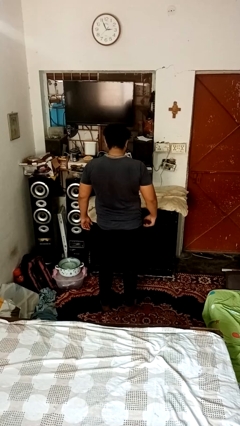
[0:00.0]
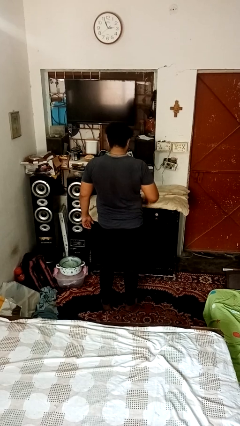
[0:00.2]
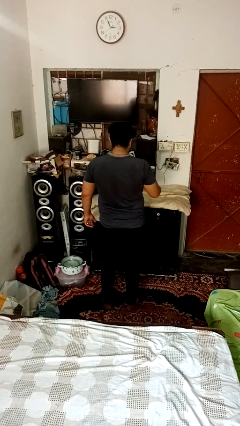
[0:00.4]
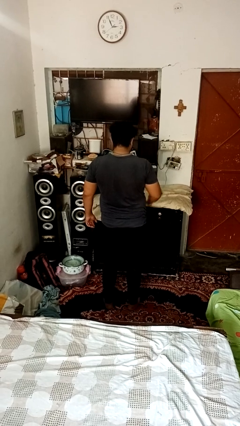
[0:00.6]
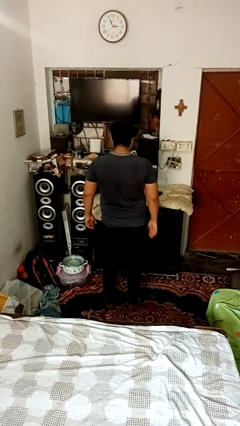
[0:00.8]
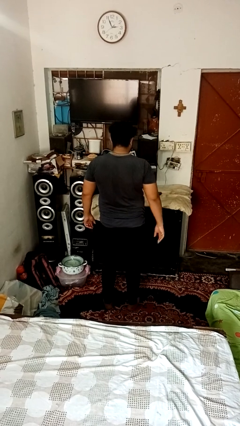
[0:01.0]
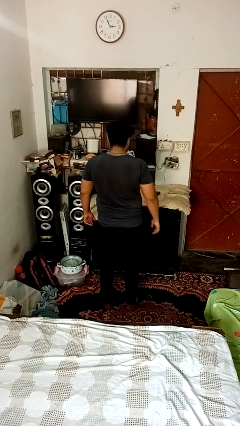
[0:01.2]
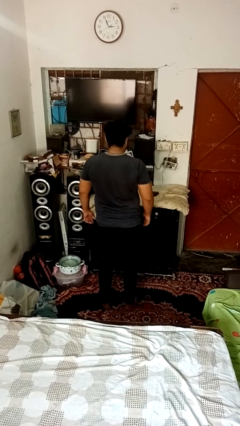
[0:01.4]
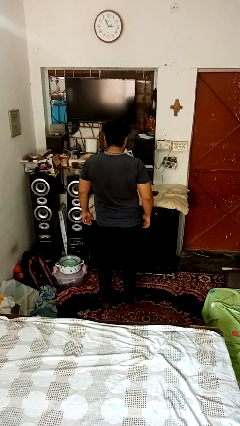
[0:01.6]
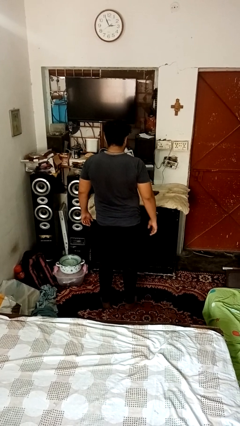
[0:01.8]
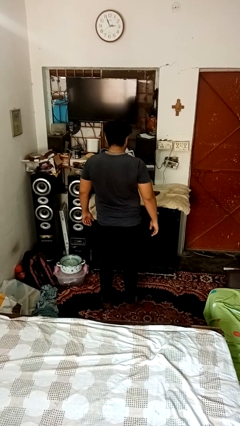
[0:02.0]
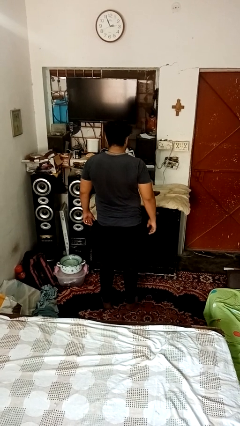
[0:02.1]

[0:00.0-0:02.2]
person throws object on table

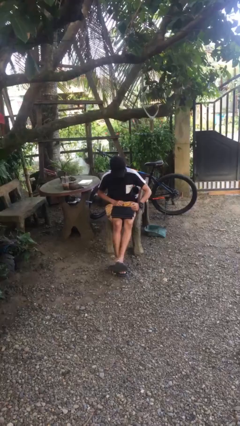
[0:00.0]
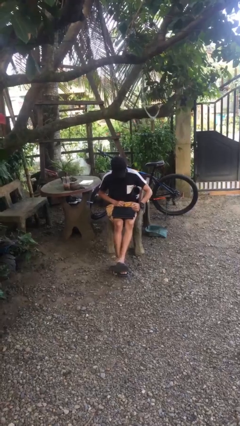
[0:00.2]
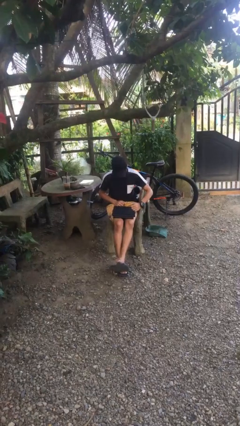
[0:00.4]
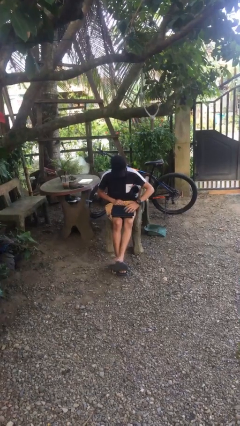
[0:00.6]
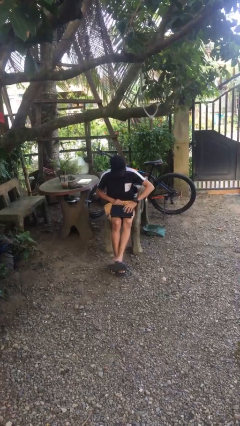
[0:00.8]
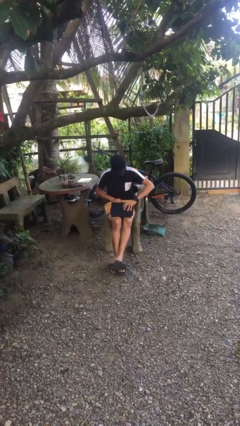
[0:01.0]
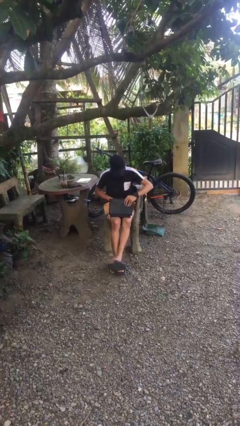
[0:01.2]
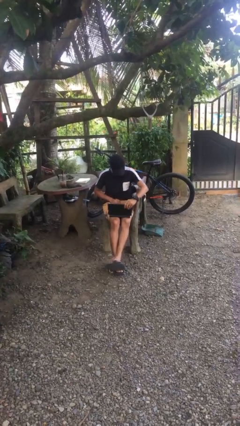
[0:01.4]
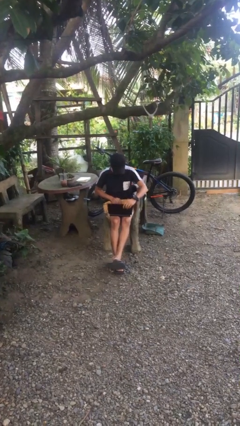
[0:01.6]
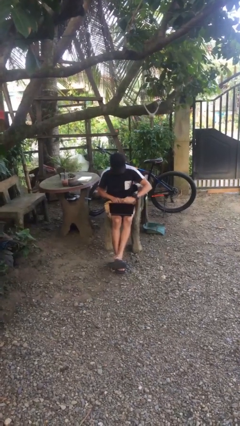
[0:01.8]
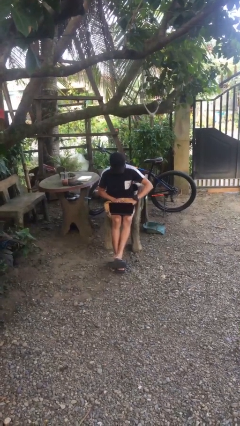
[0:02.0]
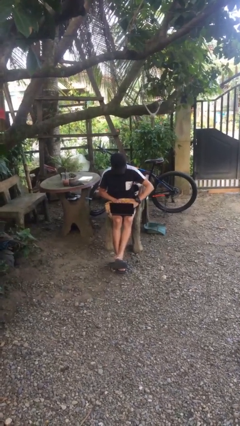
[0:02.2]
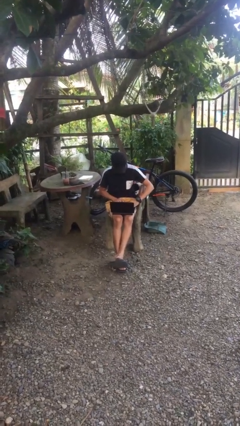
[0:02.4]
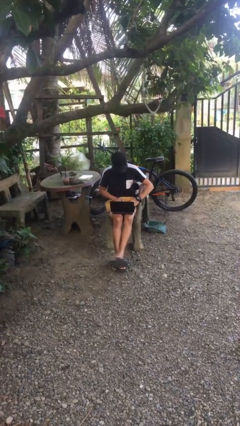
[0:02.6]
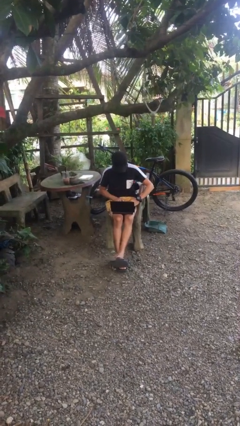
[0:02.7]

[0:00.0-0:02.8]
person interacts with laptop

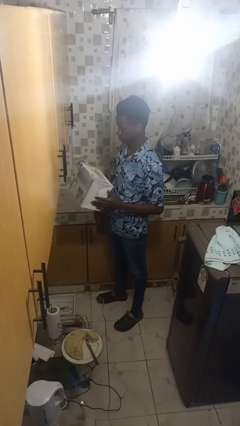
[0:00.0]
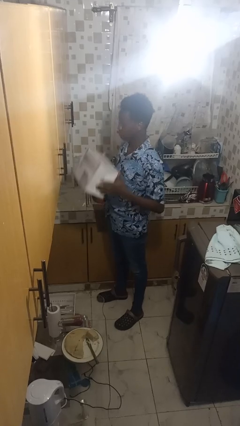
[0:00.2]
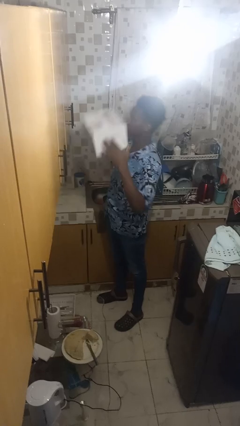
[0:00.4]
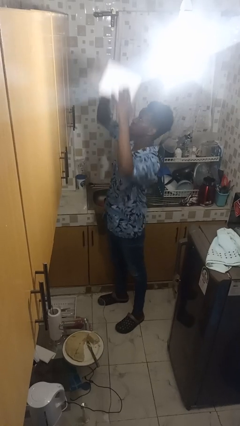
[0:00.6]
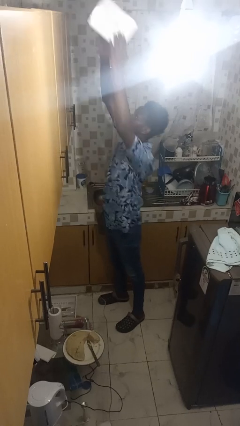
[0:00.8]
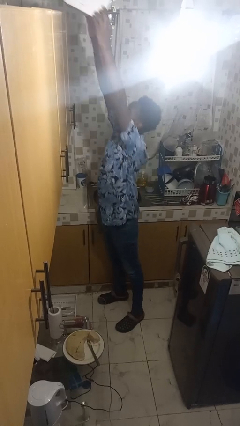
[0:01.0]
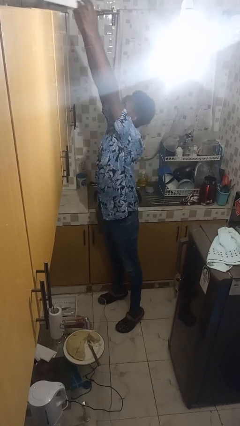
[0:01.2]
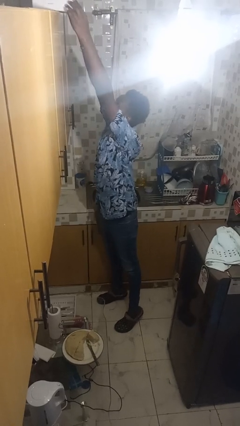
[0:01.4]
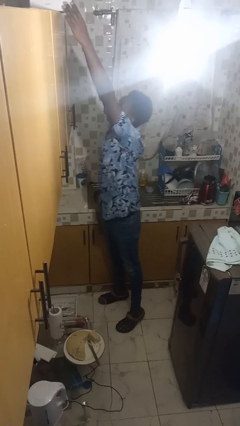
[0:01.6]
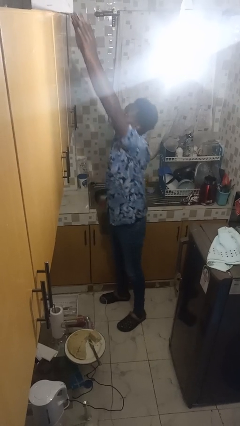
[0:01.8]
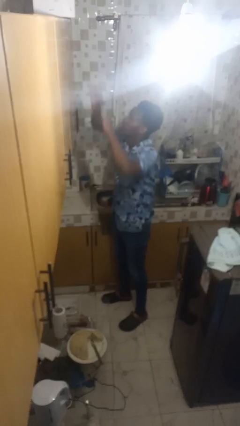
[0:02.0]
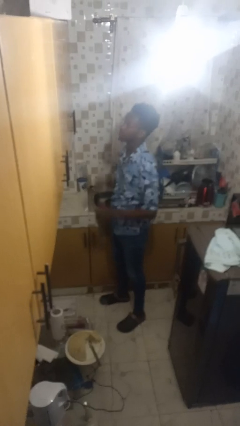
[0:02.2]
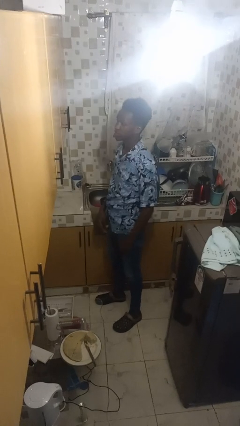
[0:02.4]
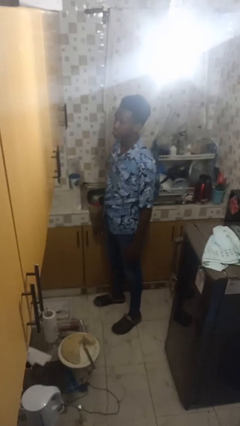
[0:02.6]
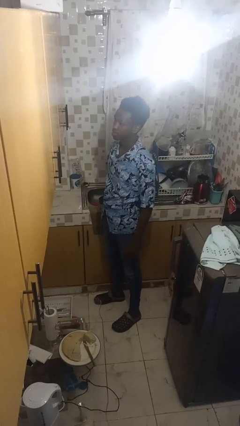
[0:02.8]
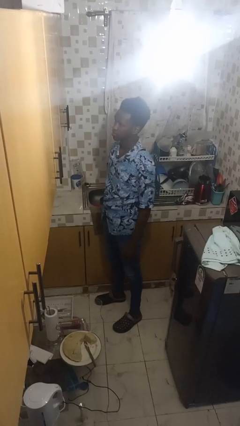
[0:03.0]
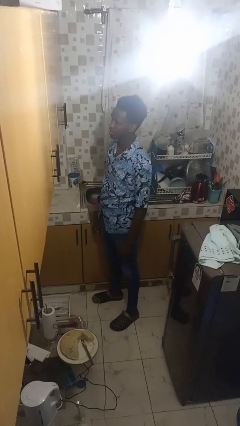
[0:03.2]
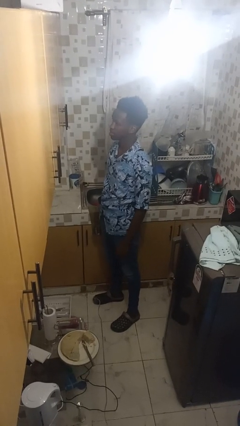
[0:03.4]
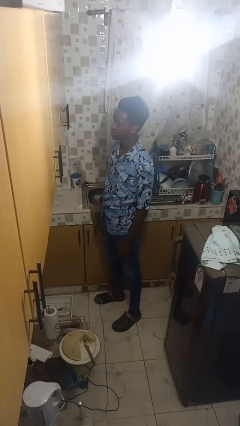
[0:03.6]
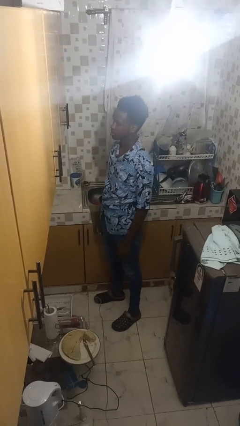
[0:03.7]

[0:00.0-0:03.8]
person puts down object on shelf

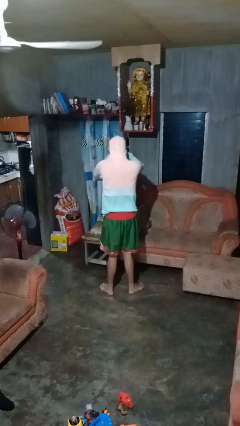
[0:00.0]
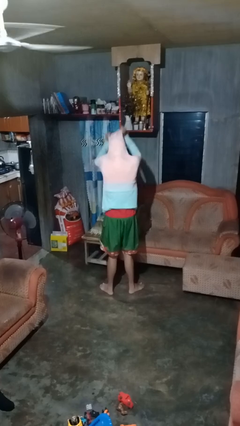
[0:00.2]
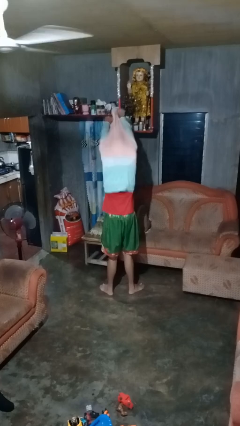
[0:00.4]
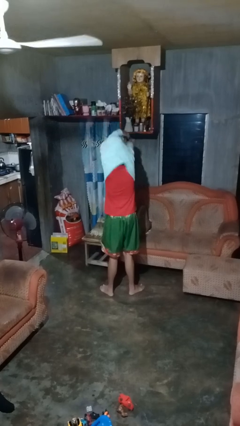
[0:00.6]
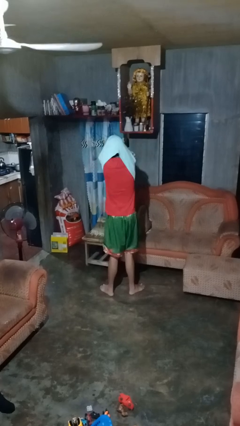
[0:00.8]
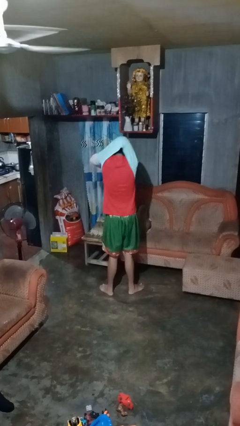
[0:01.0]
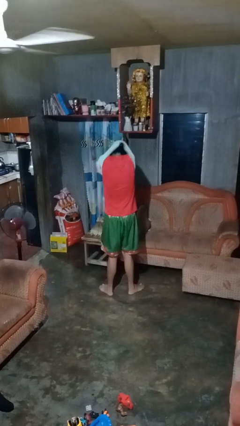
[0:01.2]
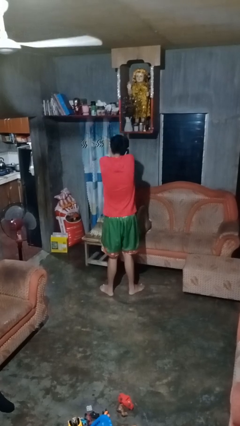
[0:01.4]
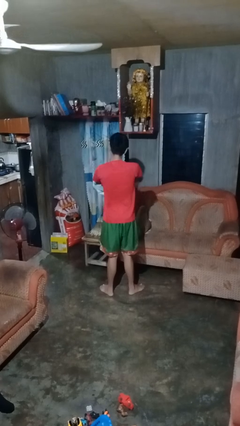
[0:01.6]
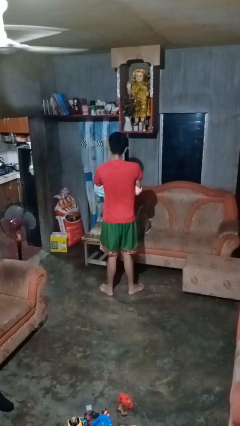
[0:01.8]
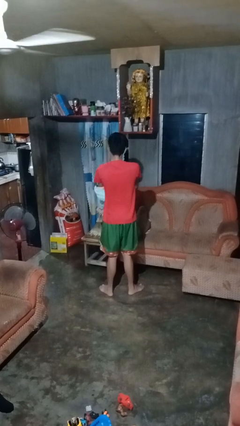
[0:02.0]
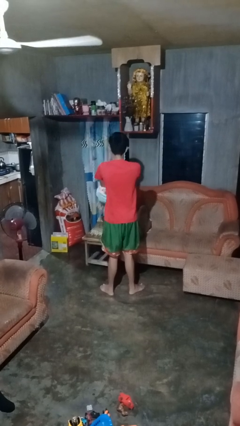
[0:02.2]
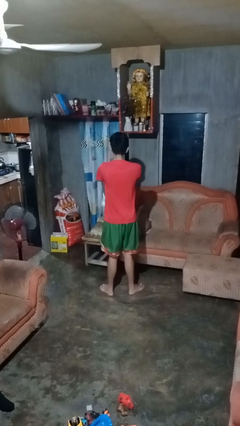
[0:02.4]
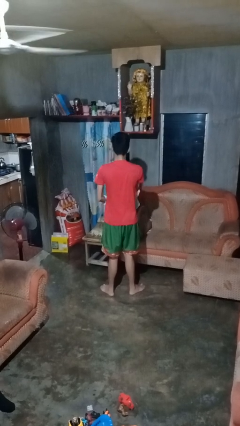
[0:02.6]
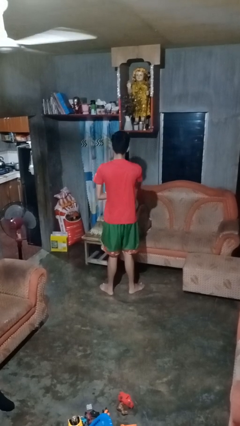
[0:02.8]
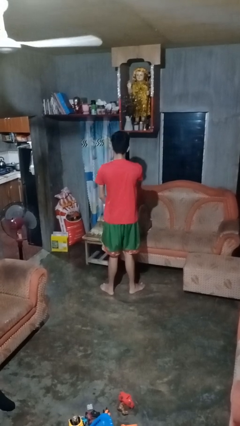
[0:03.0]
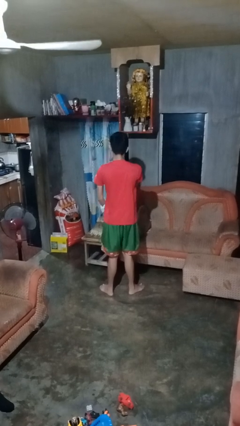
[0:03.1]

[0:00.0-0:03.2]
person takes off hoodie

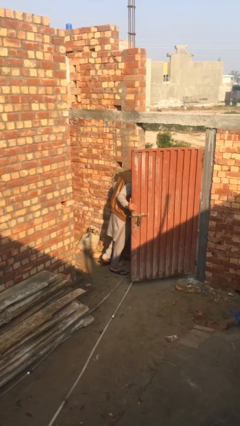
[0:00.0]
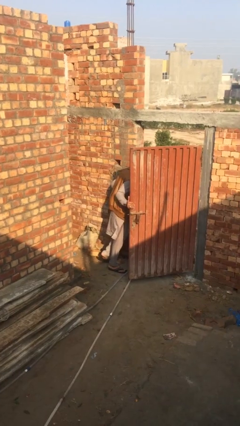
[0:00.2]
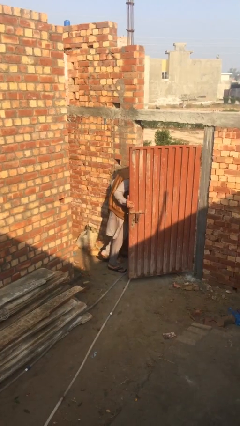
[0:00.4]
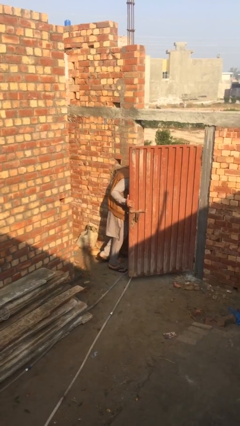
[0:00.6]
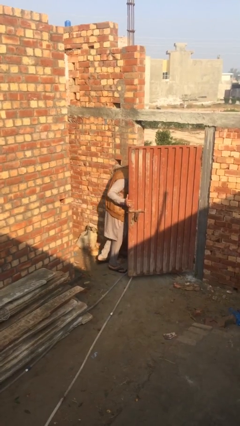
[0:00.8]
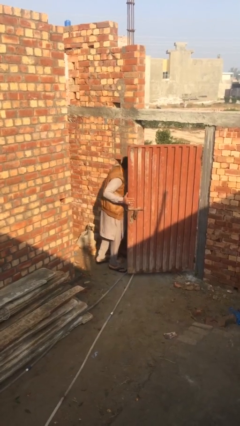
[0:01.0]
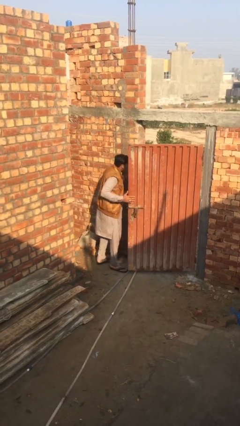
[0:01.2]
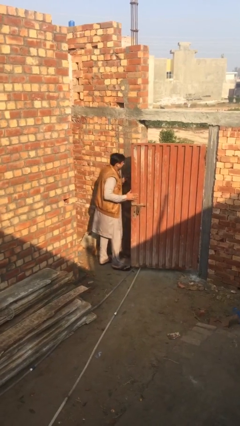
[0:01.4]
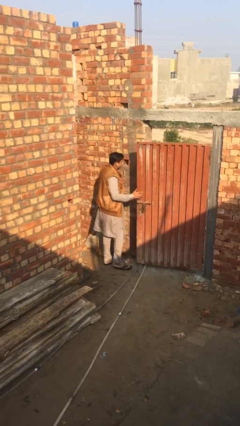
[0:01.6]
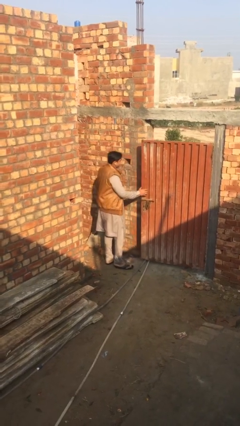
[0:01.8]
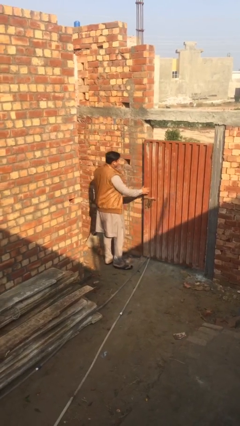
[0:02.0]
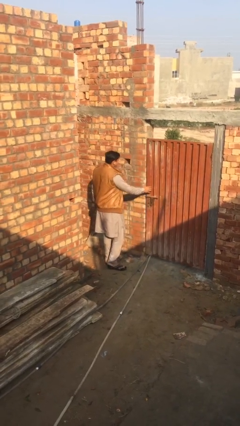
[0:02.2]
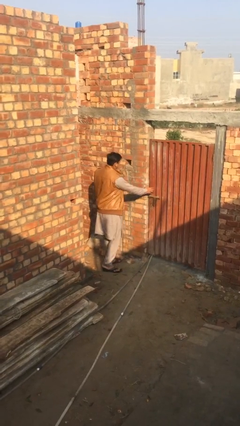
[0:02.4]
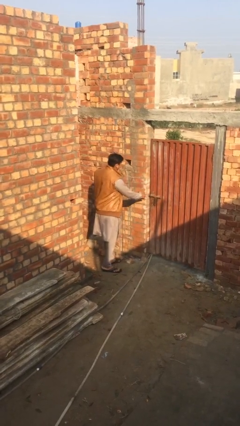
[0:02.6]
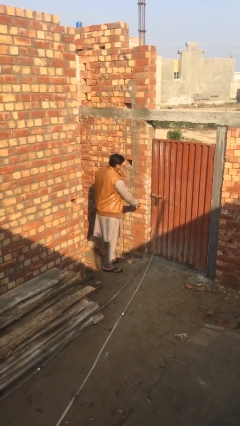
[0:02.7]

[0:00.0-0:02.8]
person closes facility door

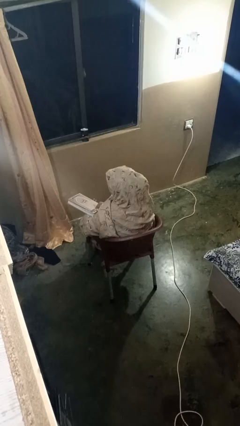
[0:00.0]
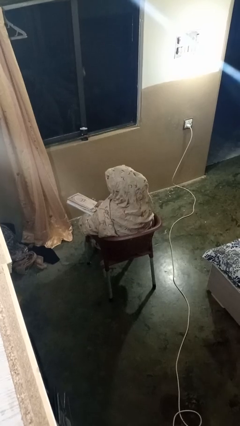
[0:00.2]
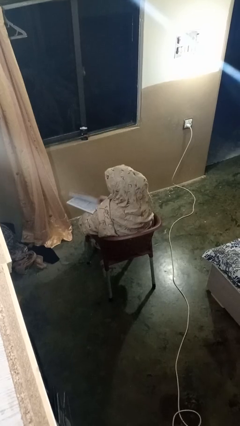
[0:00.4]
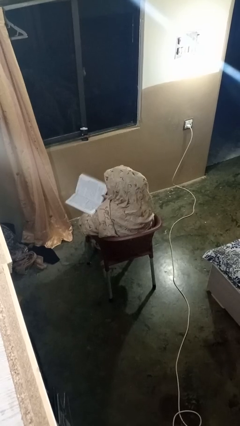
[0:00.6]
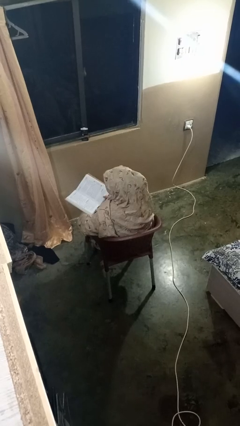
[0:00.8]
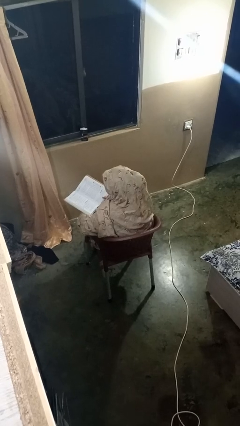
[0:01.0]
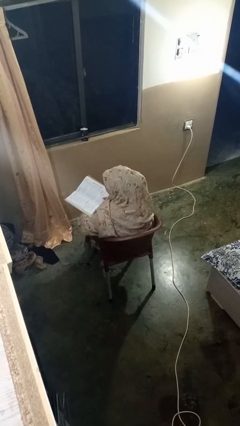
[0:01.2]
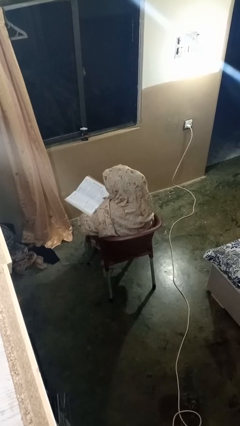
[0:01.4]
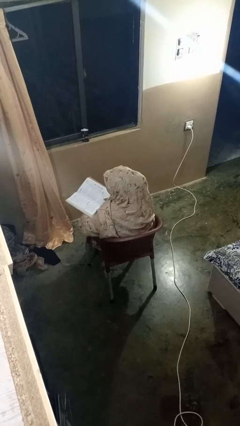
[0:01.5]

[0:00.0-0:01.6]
person reads book

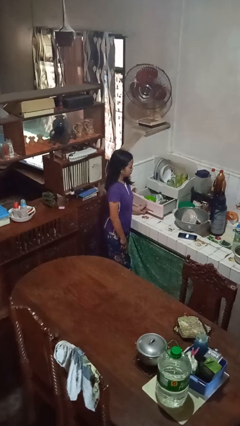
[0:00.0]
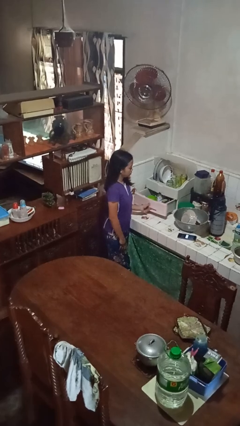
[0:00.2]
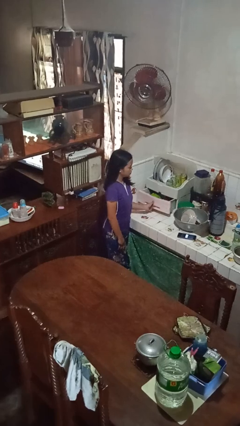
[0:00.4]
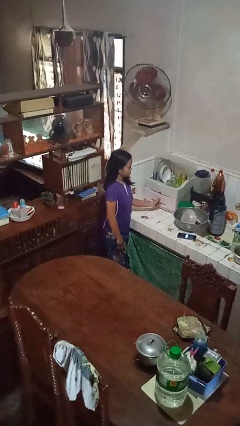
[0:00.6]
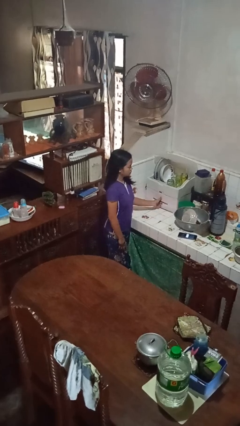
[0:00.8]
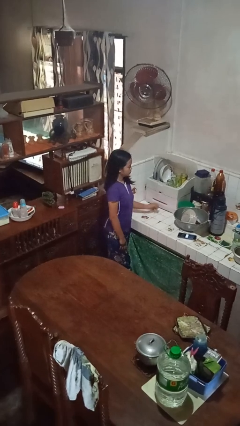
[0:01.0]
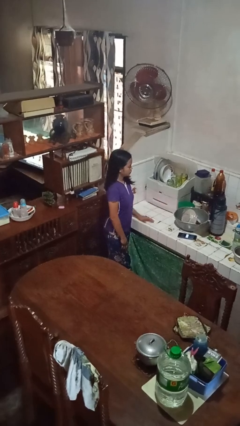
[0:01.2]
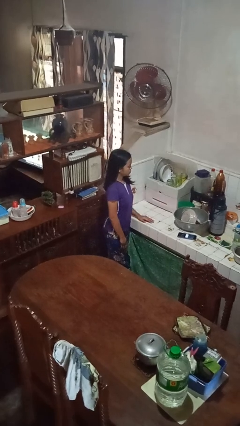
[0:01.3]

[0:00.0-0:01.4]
person closes kitchen drawer
